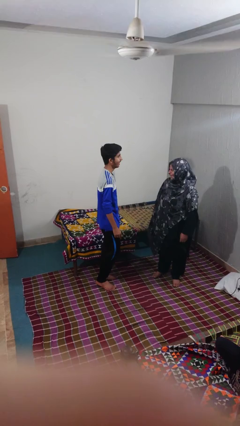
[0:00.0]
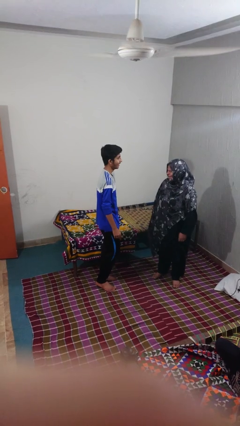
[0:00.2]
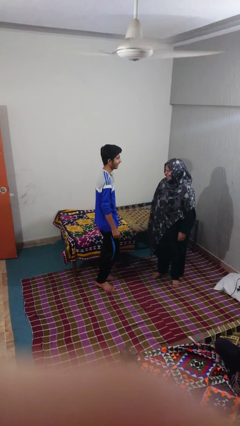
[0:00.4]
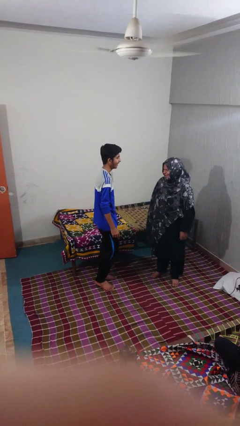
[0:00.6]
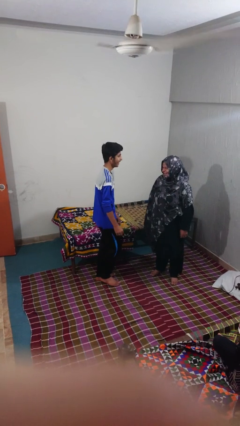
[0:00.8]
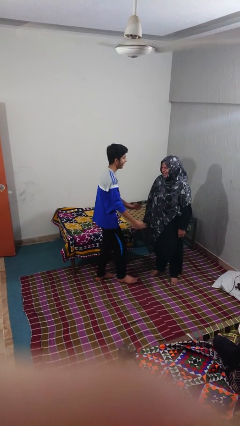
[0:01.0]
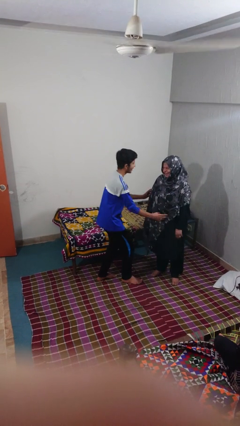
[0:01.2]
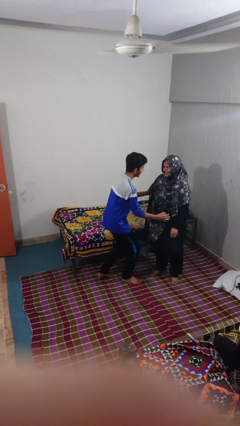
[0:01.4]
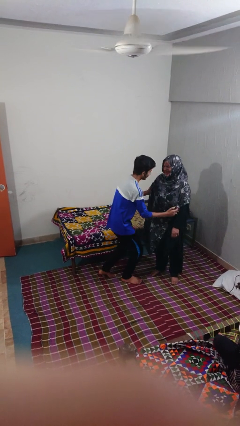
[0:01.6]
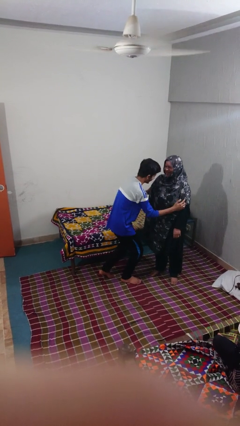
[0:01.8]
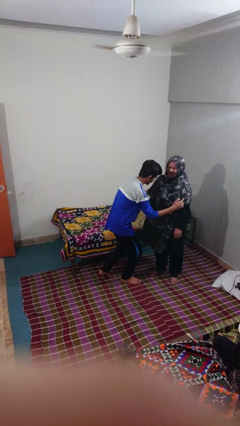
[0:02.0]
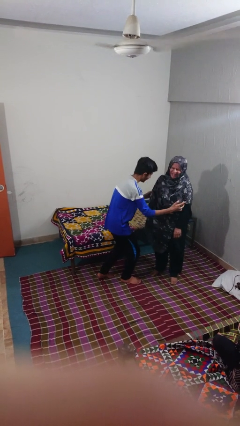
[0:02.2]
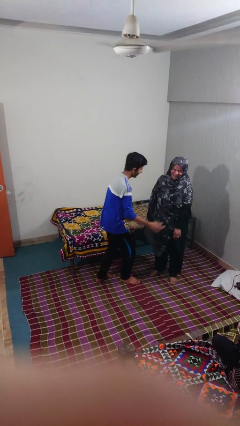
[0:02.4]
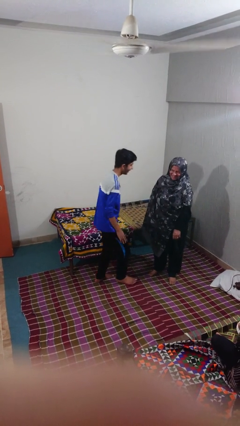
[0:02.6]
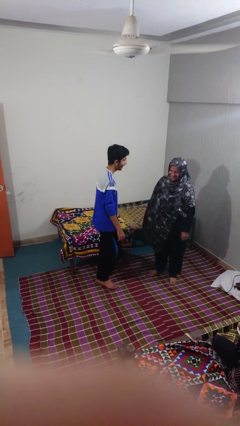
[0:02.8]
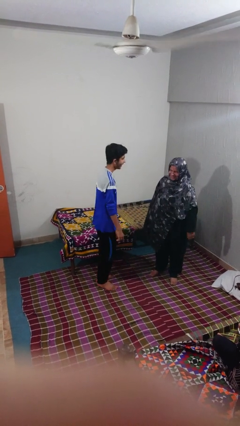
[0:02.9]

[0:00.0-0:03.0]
person tickles person

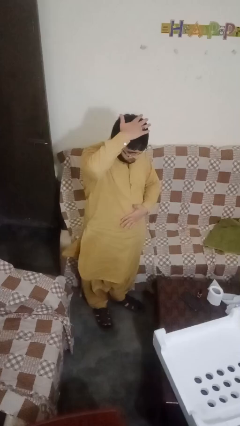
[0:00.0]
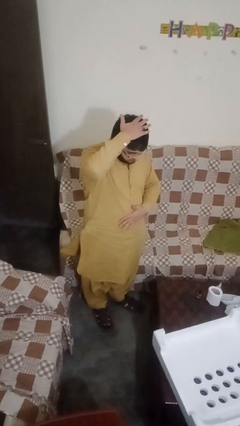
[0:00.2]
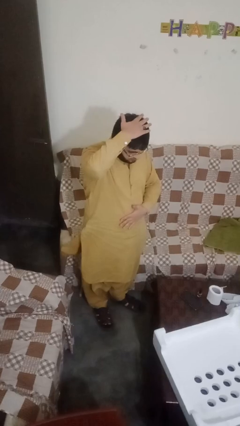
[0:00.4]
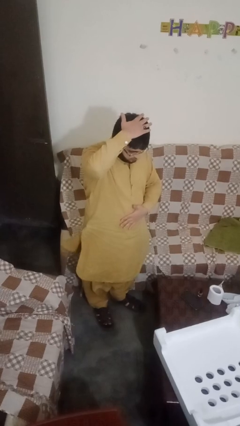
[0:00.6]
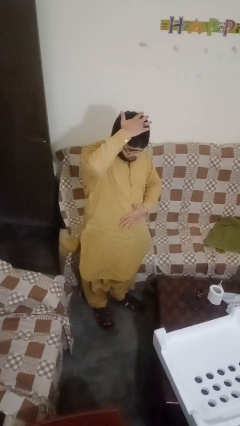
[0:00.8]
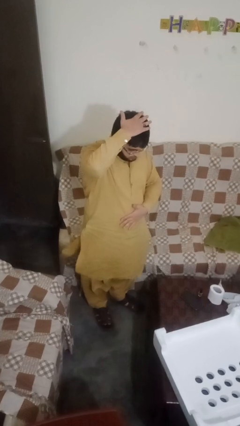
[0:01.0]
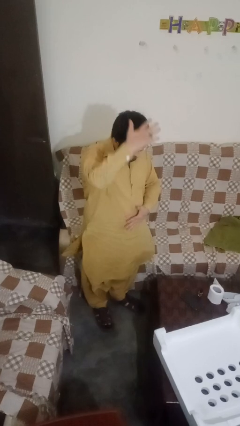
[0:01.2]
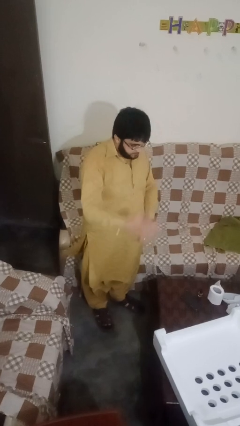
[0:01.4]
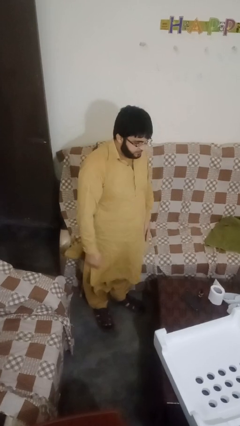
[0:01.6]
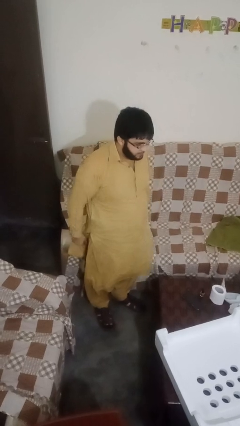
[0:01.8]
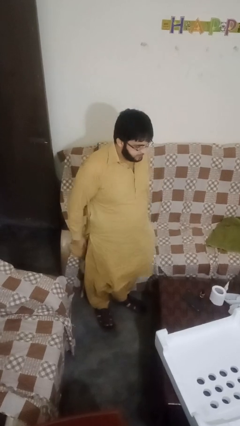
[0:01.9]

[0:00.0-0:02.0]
person pats head

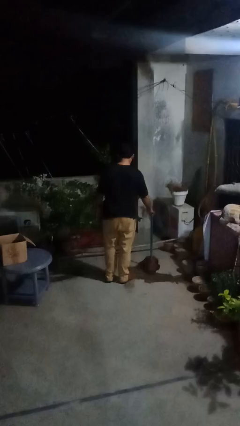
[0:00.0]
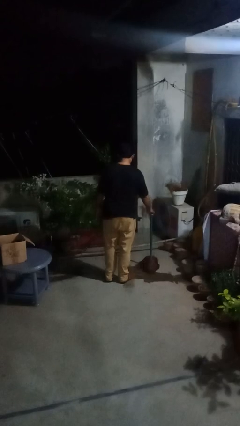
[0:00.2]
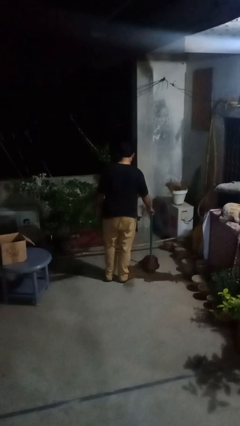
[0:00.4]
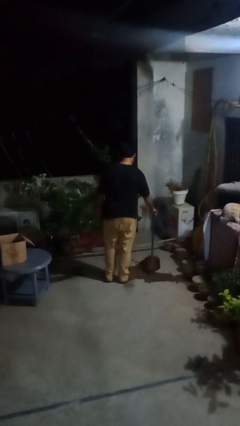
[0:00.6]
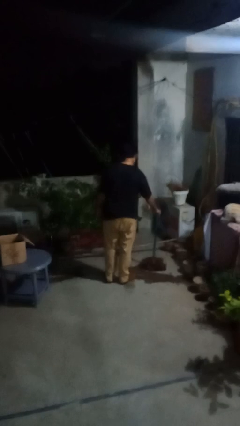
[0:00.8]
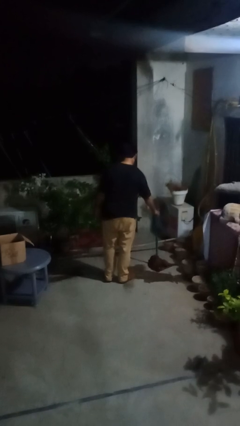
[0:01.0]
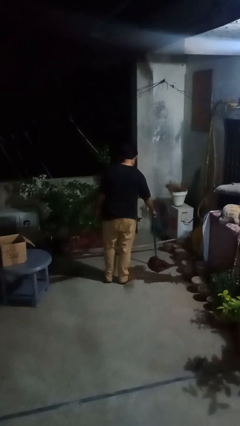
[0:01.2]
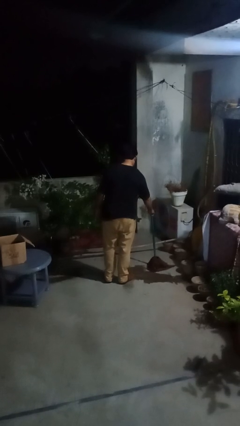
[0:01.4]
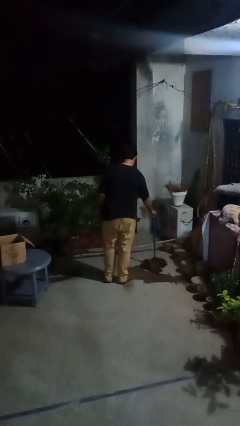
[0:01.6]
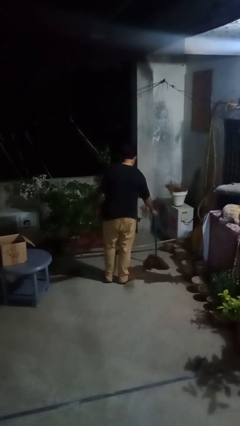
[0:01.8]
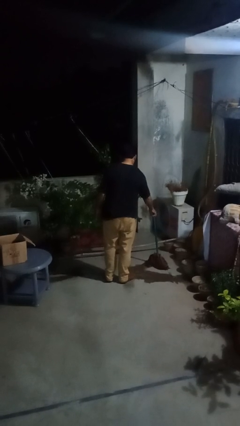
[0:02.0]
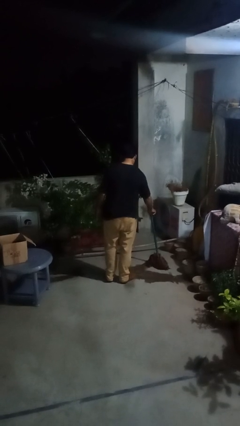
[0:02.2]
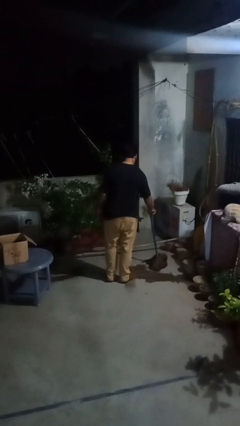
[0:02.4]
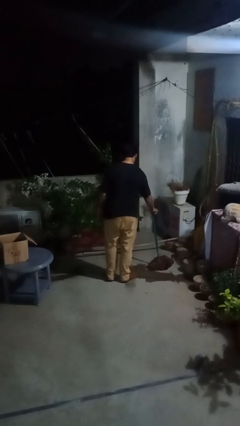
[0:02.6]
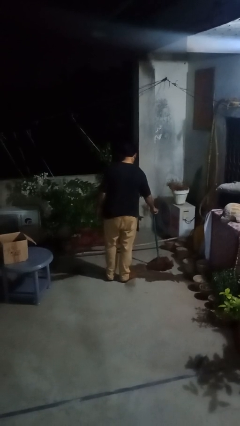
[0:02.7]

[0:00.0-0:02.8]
person mops

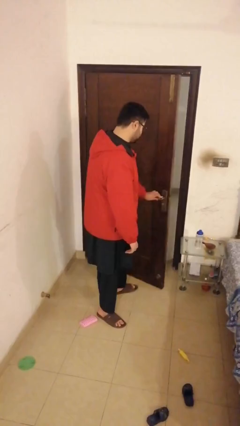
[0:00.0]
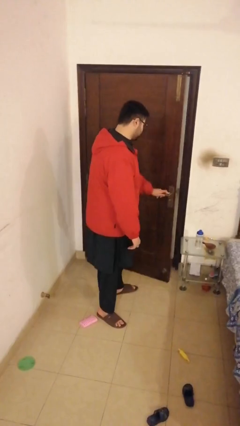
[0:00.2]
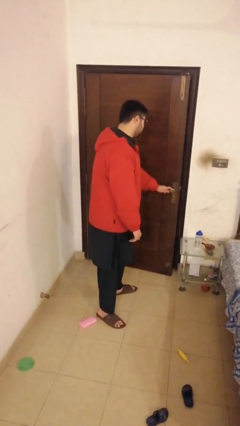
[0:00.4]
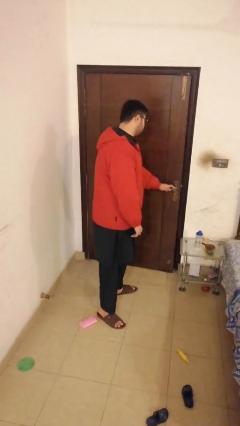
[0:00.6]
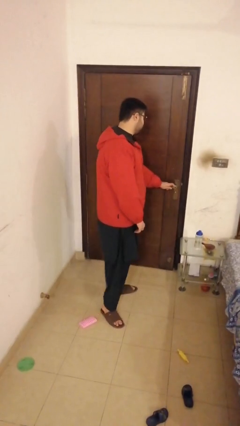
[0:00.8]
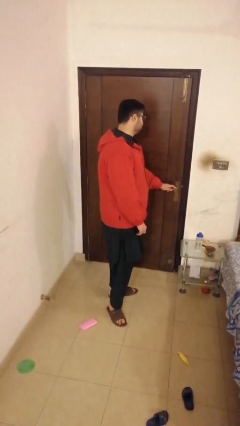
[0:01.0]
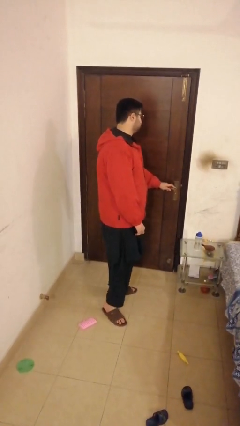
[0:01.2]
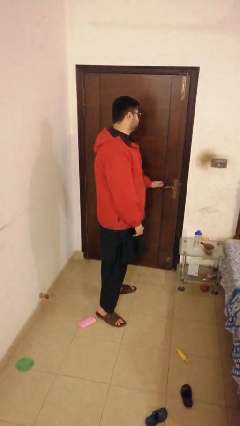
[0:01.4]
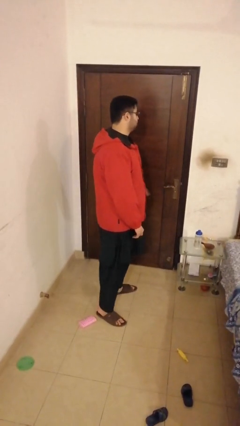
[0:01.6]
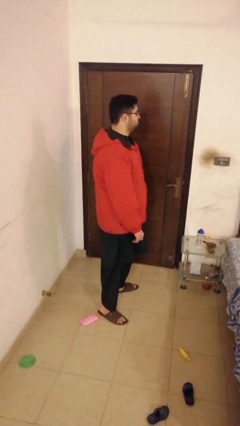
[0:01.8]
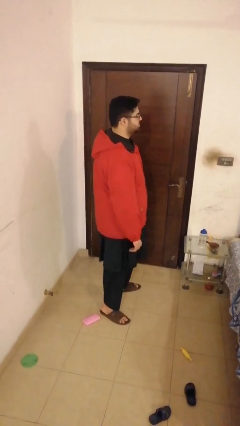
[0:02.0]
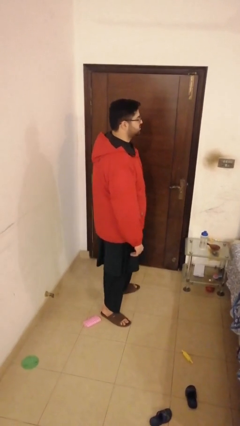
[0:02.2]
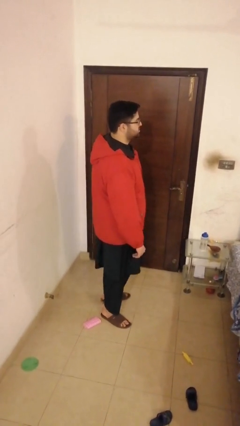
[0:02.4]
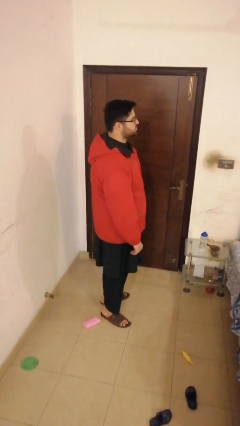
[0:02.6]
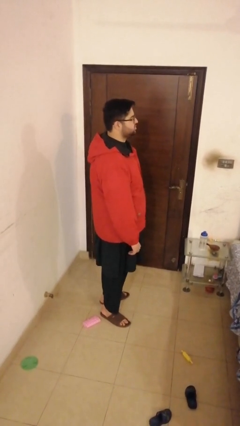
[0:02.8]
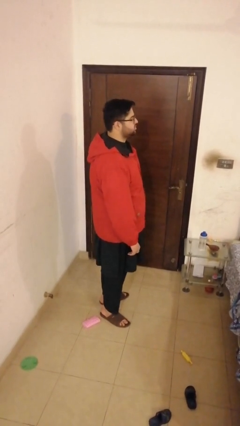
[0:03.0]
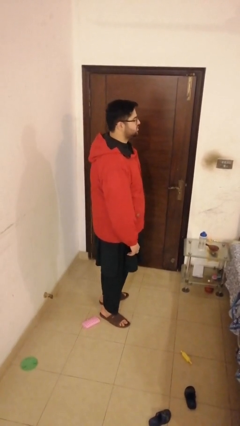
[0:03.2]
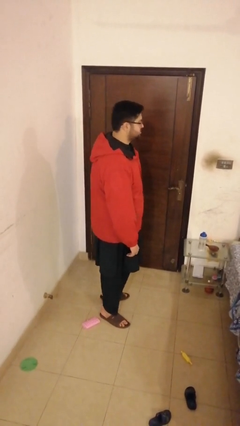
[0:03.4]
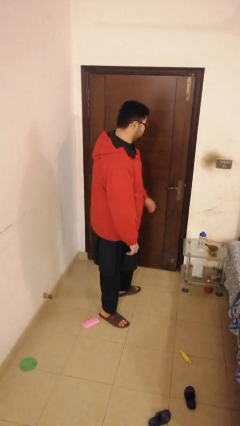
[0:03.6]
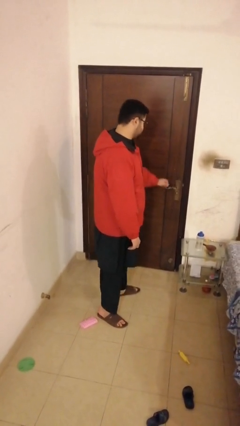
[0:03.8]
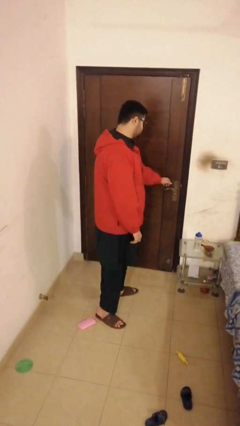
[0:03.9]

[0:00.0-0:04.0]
person closes facility door

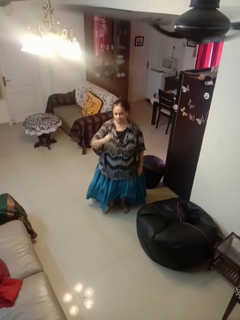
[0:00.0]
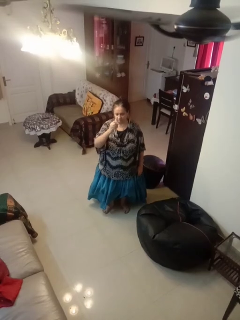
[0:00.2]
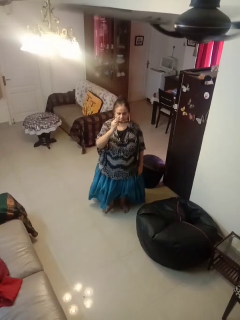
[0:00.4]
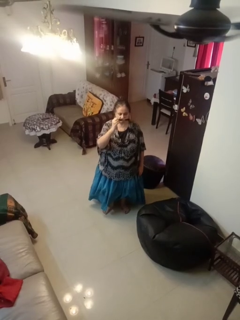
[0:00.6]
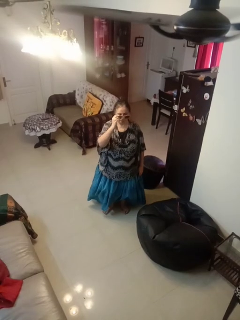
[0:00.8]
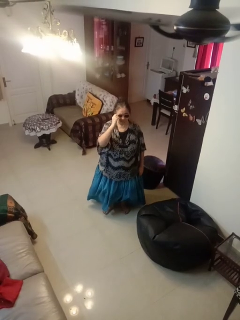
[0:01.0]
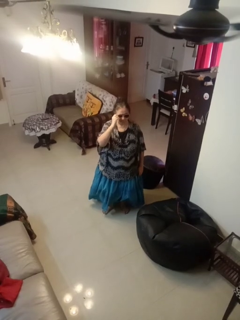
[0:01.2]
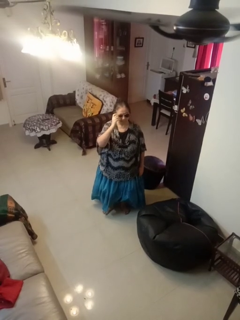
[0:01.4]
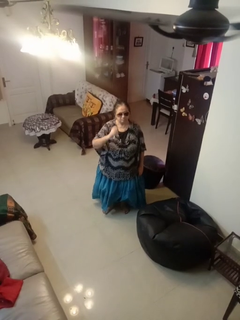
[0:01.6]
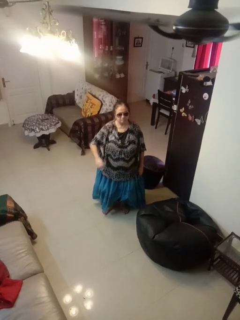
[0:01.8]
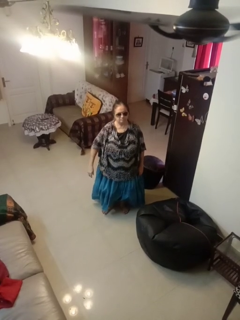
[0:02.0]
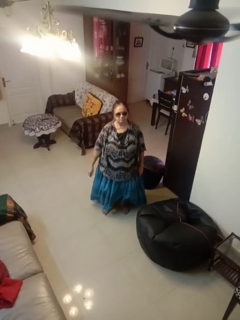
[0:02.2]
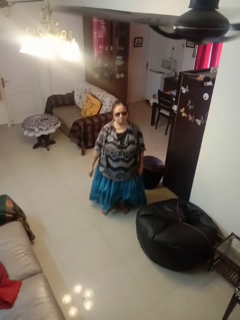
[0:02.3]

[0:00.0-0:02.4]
person puts on sunglasses

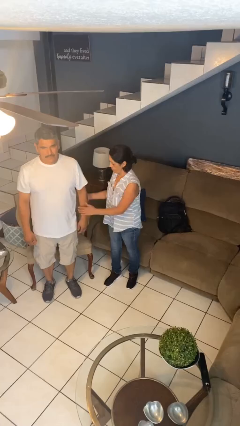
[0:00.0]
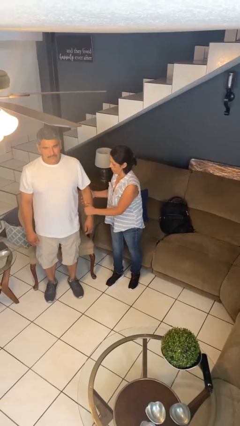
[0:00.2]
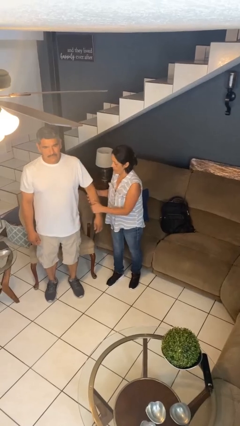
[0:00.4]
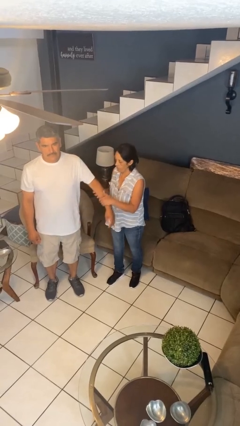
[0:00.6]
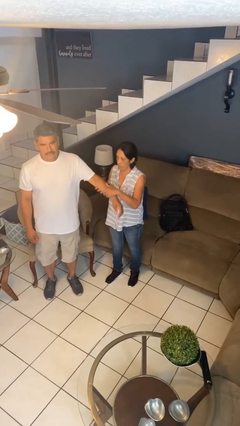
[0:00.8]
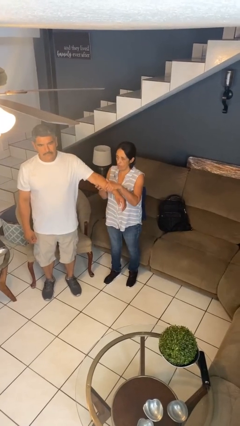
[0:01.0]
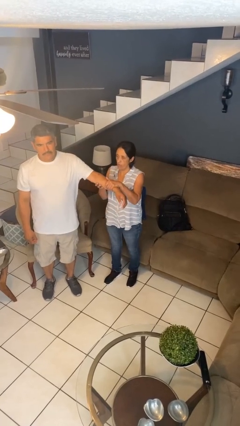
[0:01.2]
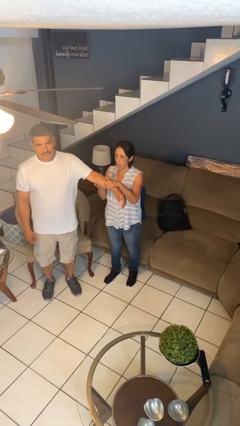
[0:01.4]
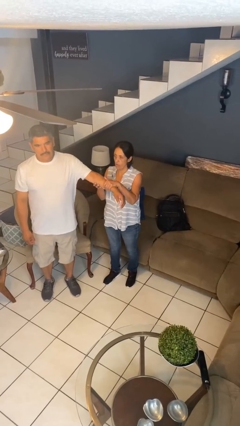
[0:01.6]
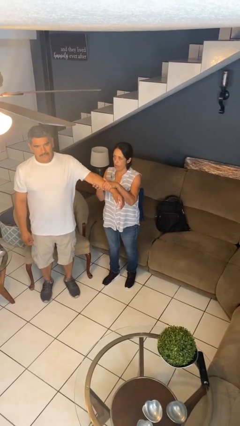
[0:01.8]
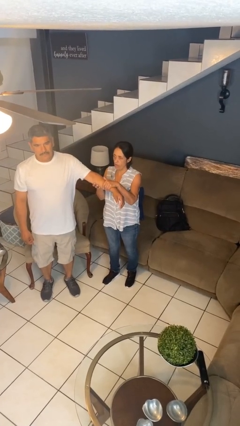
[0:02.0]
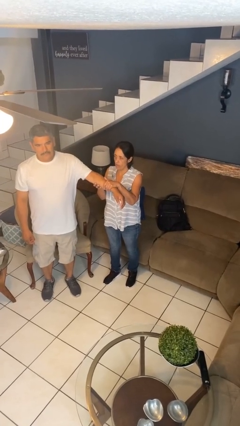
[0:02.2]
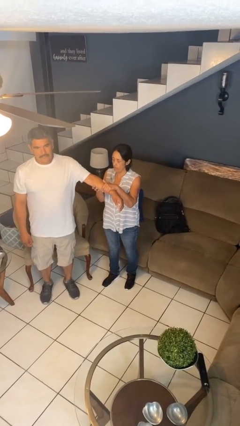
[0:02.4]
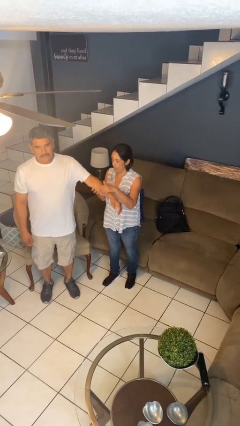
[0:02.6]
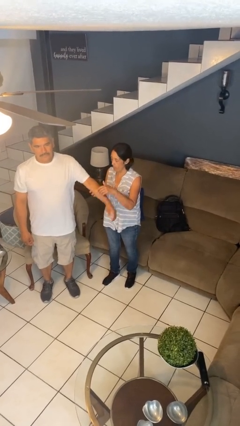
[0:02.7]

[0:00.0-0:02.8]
person grabs person by forearm

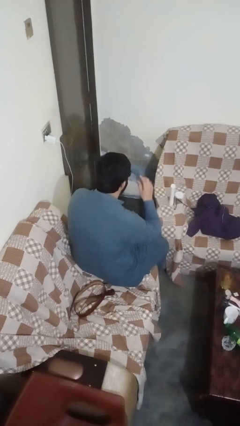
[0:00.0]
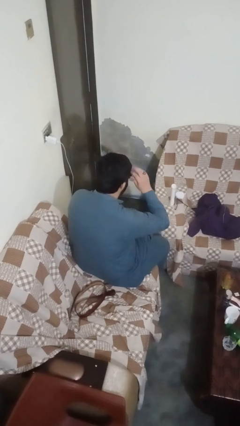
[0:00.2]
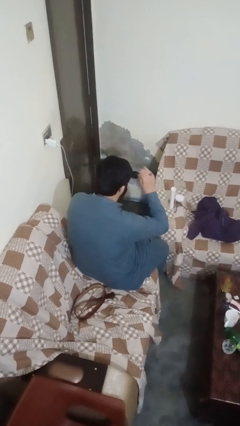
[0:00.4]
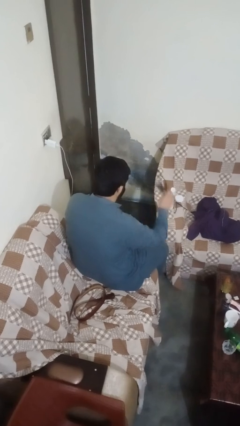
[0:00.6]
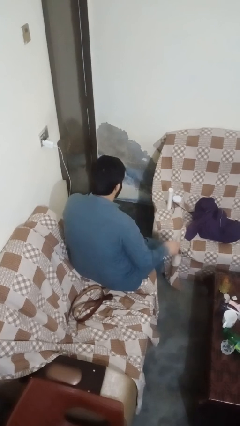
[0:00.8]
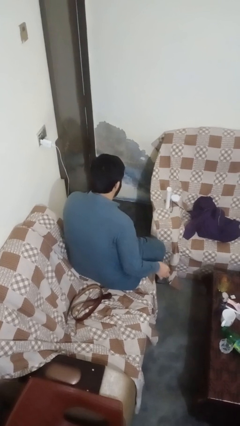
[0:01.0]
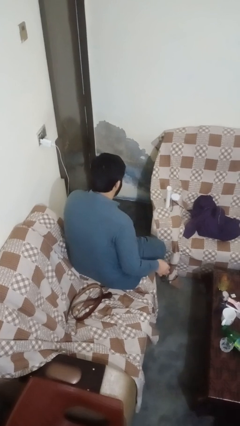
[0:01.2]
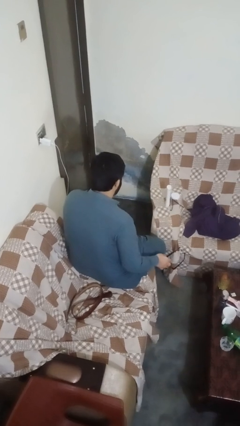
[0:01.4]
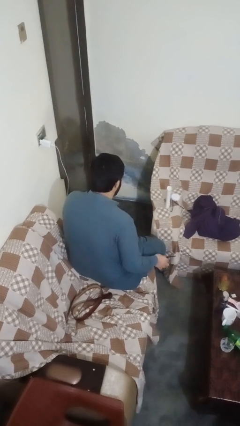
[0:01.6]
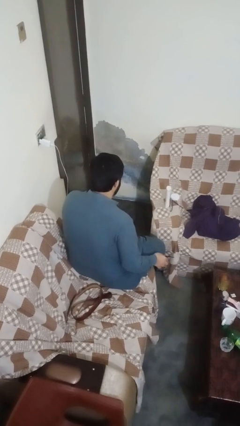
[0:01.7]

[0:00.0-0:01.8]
person takes off sunglasses
